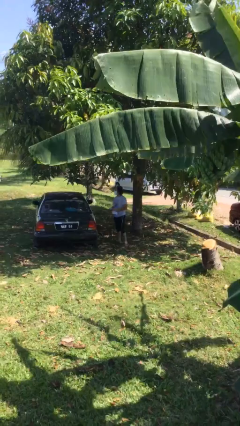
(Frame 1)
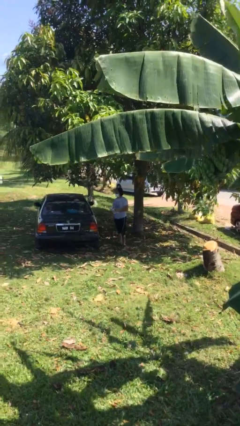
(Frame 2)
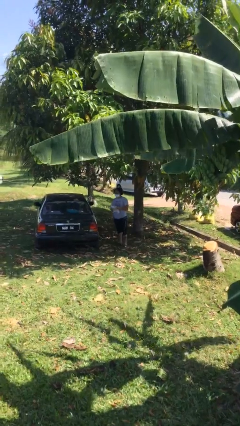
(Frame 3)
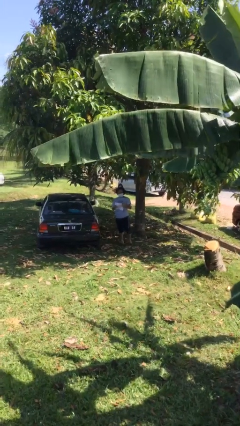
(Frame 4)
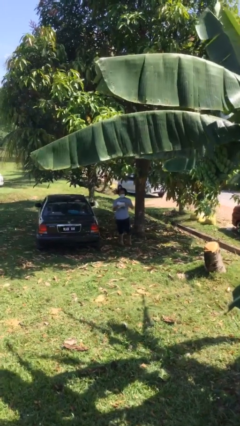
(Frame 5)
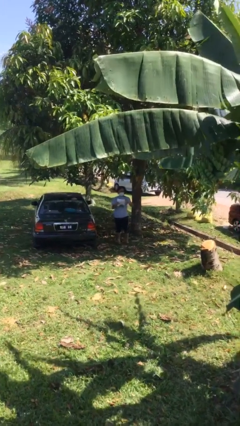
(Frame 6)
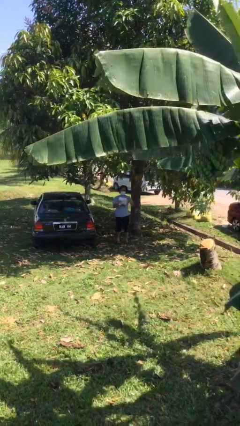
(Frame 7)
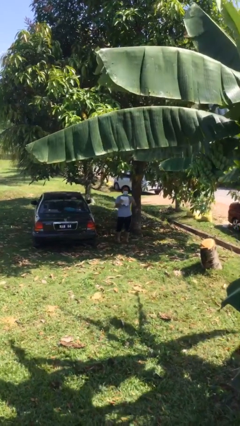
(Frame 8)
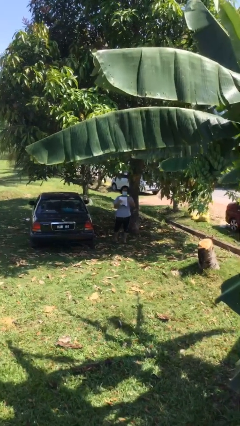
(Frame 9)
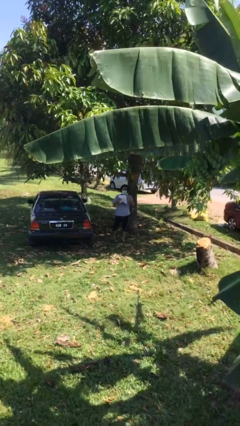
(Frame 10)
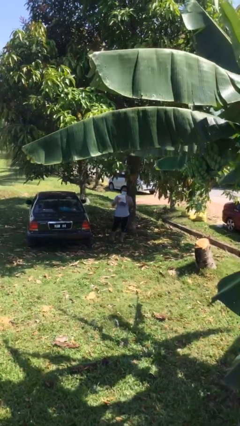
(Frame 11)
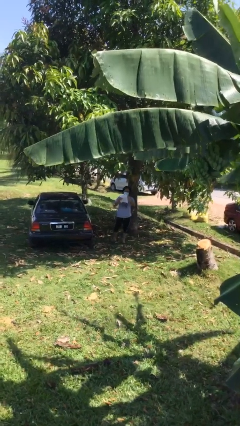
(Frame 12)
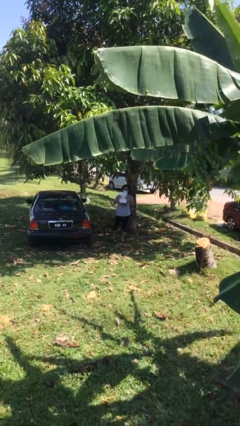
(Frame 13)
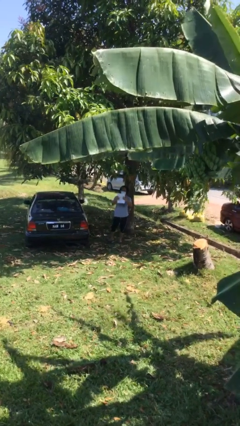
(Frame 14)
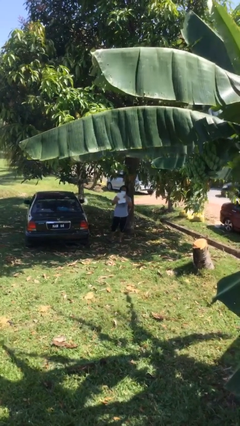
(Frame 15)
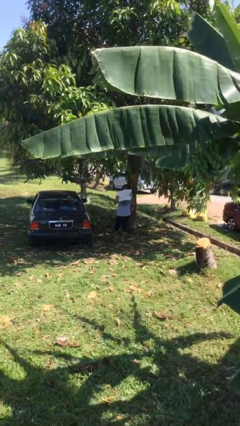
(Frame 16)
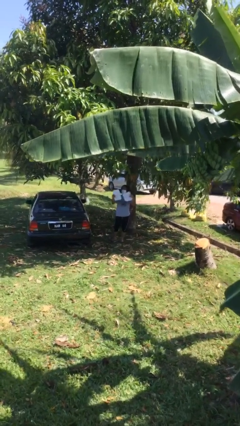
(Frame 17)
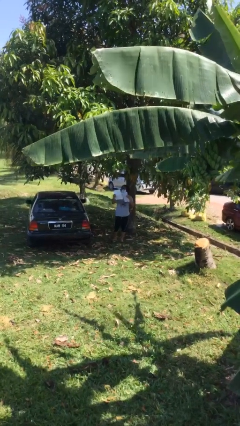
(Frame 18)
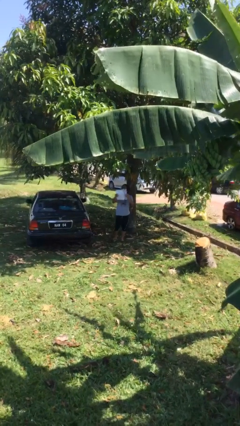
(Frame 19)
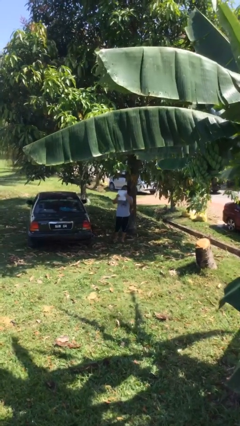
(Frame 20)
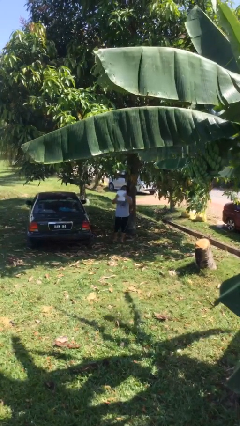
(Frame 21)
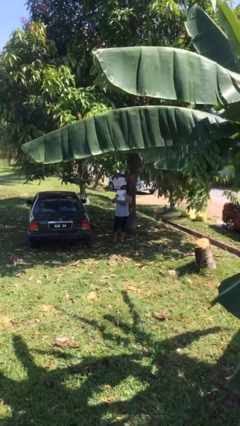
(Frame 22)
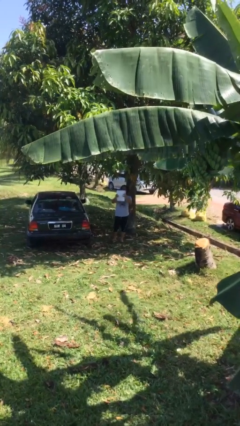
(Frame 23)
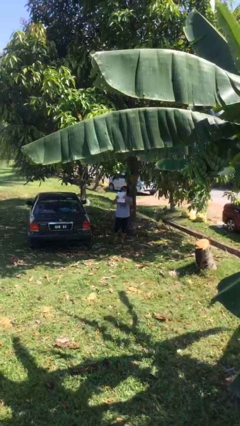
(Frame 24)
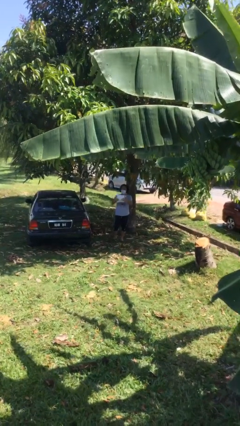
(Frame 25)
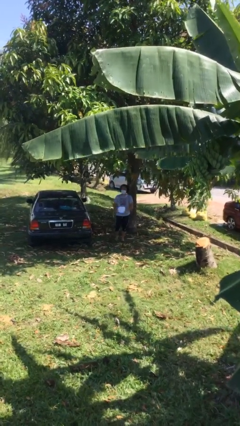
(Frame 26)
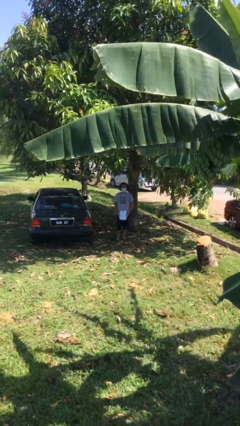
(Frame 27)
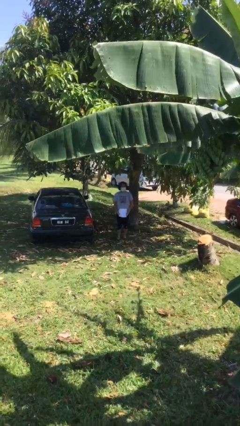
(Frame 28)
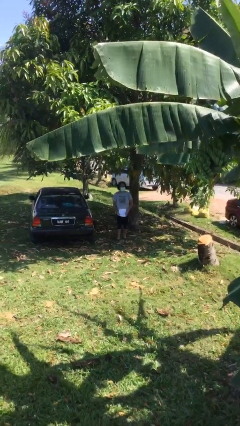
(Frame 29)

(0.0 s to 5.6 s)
person reads document

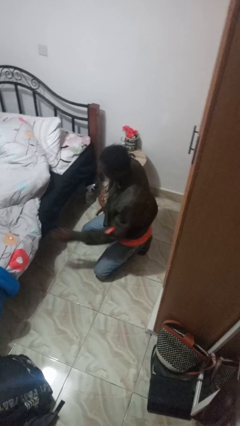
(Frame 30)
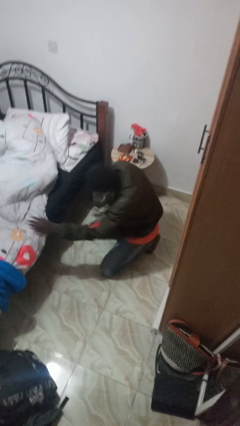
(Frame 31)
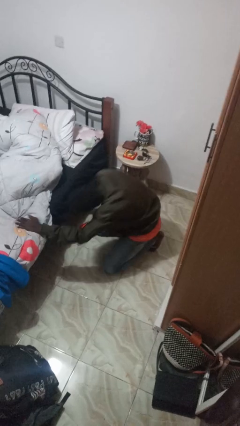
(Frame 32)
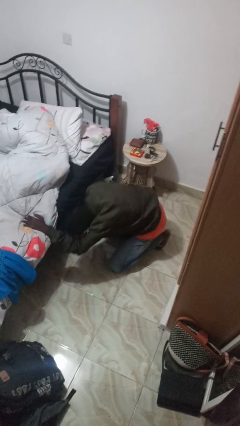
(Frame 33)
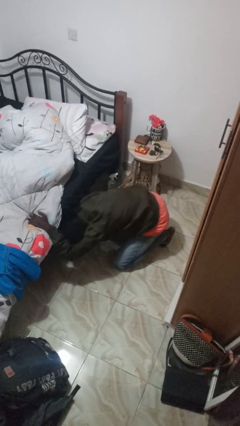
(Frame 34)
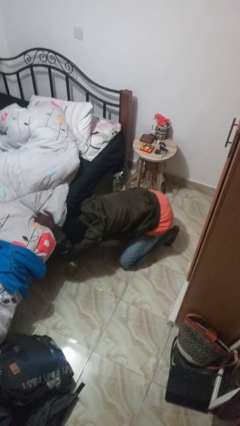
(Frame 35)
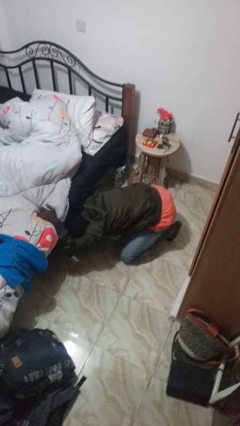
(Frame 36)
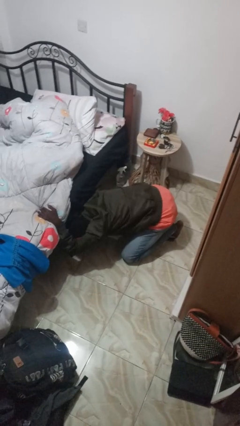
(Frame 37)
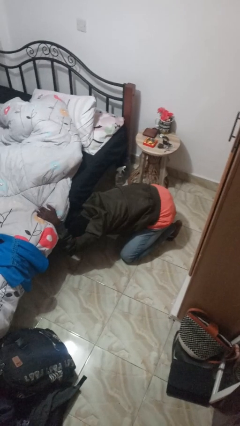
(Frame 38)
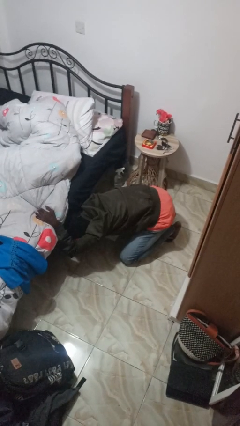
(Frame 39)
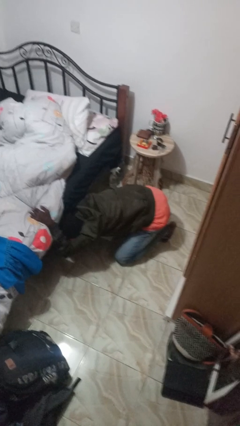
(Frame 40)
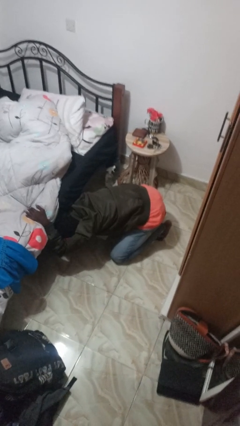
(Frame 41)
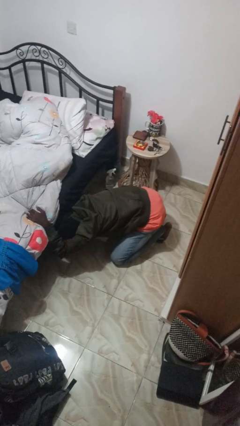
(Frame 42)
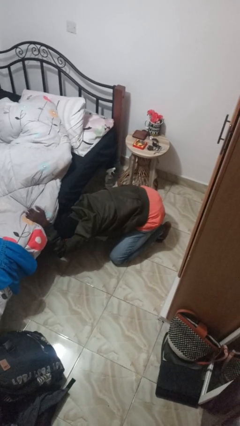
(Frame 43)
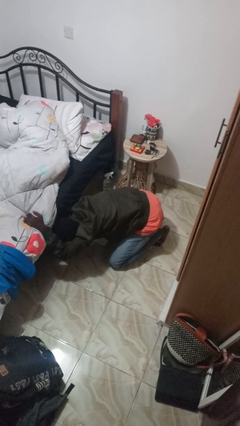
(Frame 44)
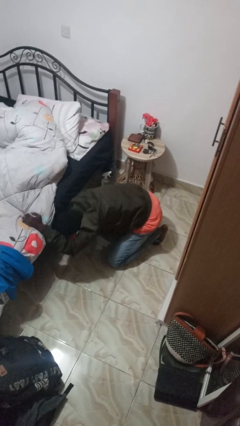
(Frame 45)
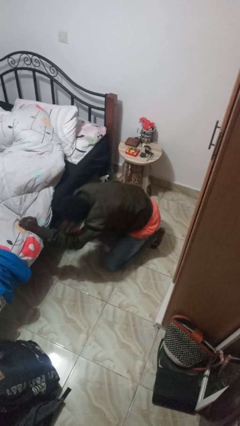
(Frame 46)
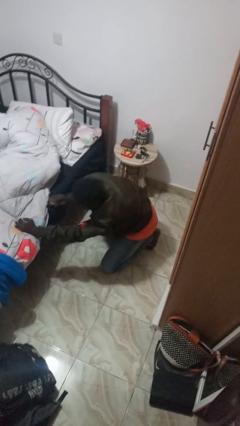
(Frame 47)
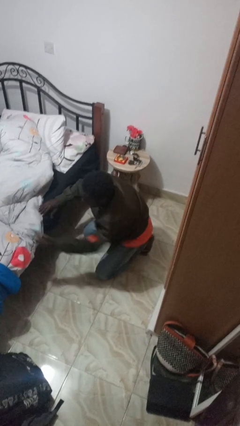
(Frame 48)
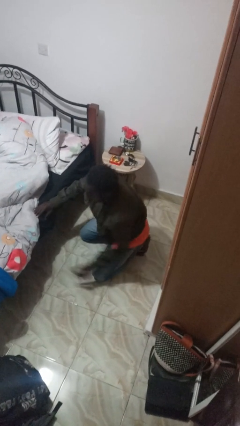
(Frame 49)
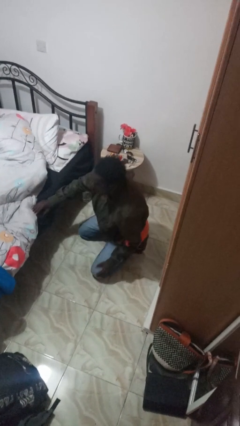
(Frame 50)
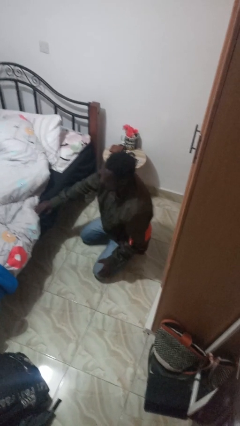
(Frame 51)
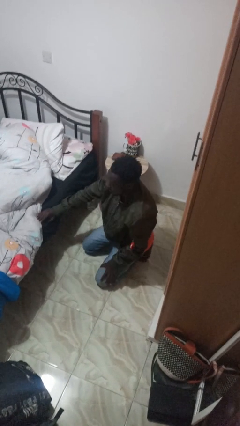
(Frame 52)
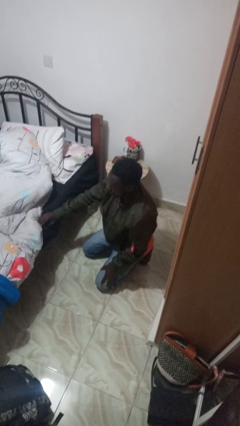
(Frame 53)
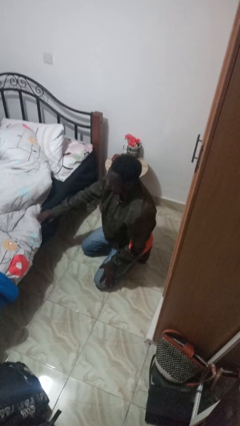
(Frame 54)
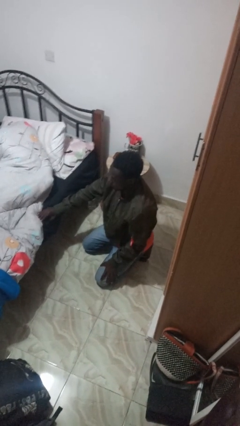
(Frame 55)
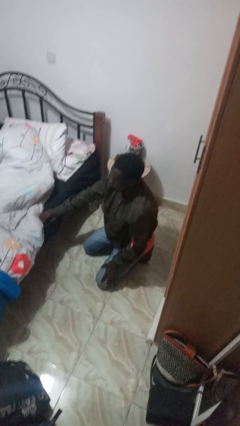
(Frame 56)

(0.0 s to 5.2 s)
person searches under bed

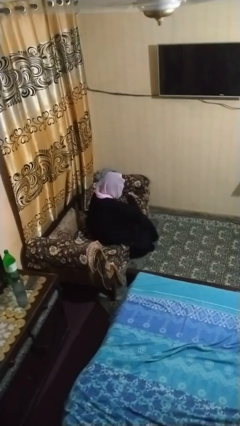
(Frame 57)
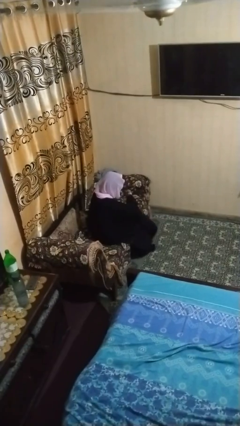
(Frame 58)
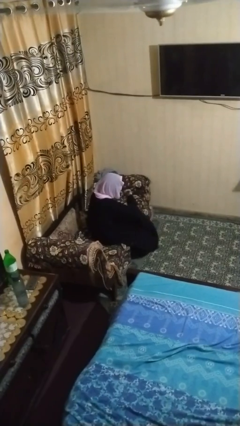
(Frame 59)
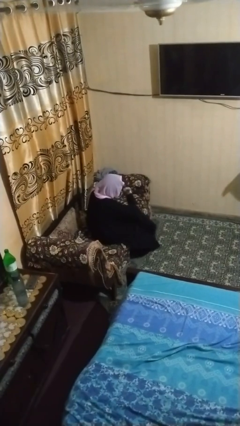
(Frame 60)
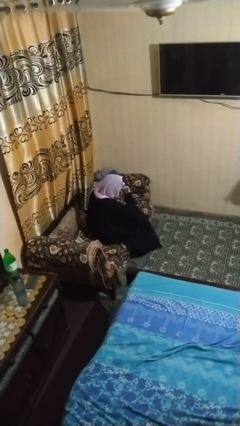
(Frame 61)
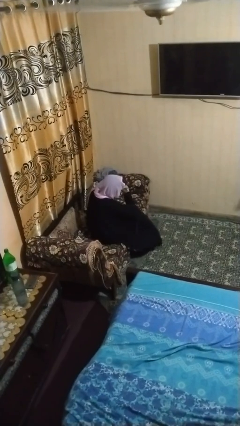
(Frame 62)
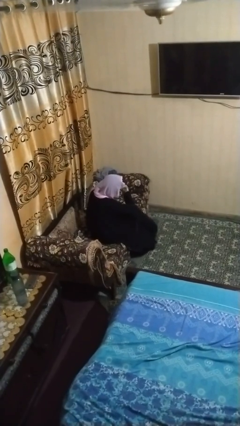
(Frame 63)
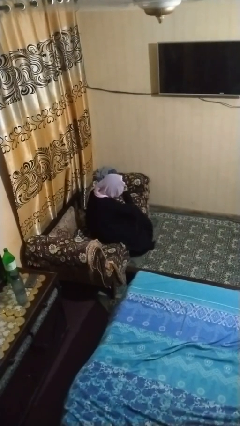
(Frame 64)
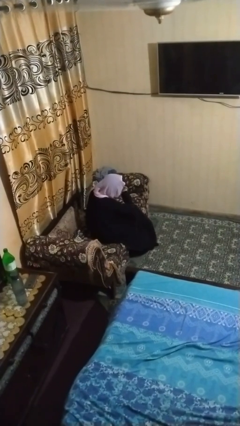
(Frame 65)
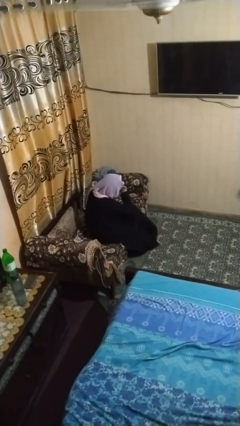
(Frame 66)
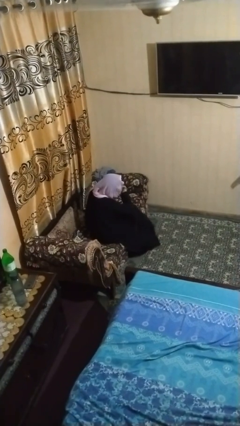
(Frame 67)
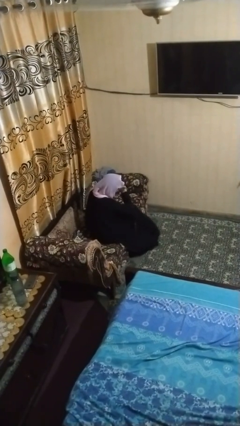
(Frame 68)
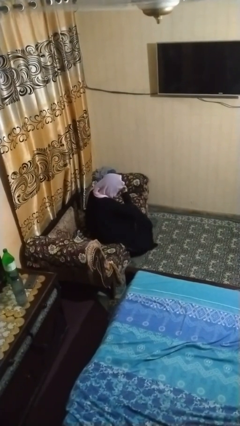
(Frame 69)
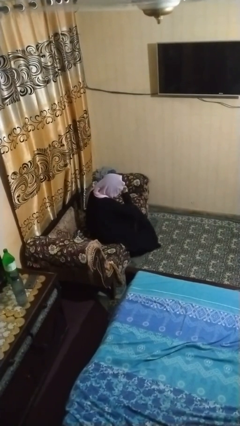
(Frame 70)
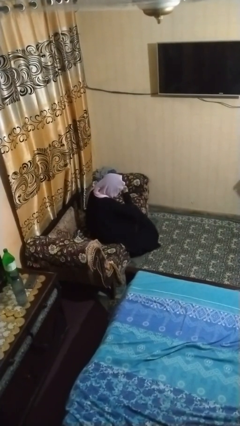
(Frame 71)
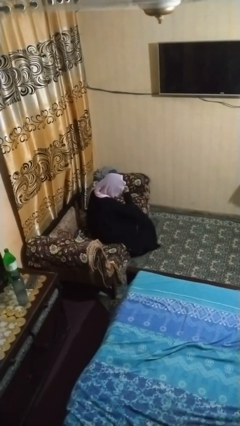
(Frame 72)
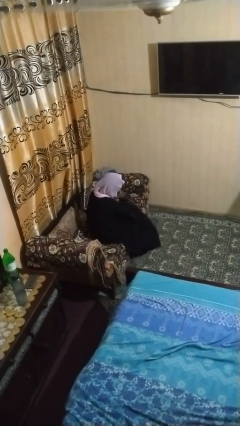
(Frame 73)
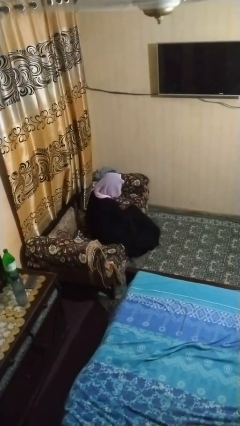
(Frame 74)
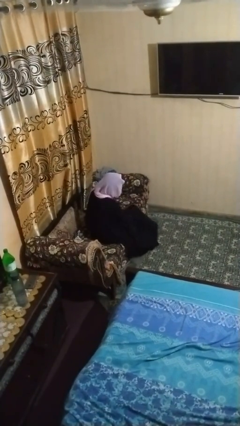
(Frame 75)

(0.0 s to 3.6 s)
person looks at wristwatch

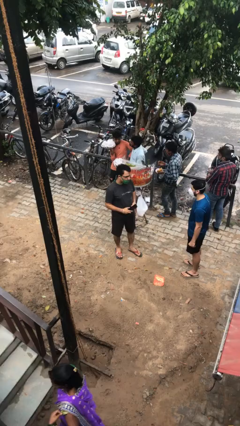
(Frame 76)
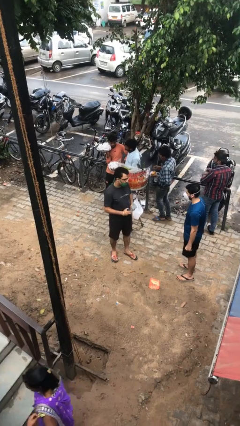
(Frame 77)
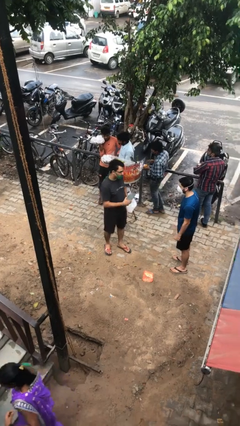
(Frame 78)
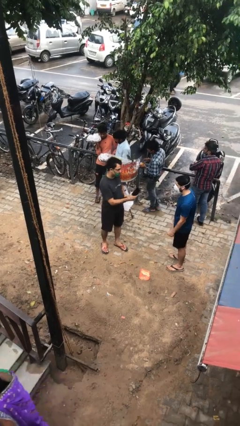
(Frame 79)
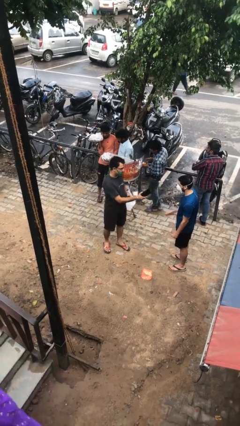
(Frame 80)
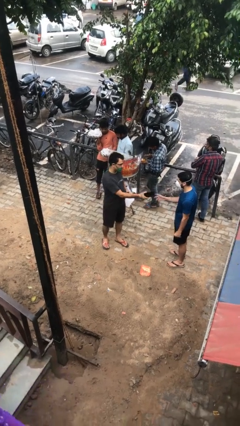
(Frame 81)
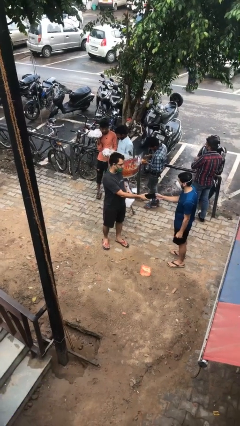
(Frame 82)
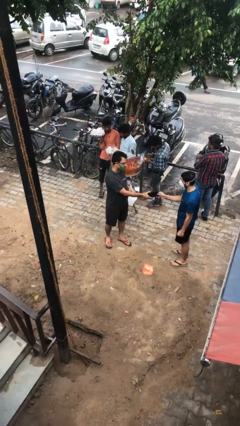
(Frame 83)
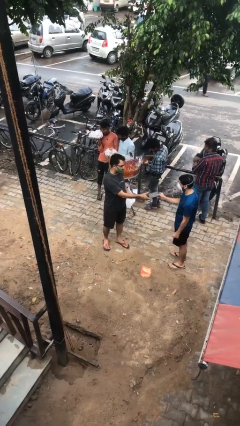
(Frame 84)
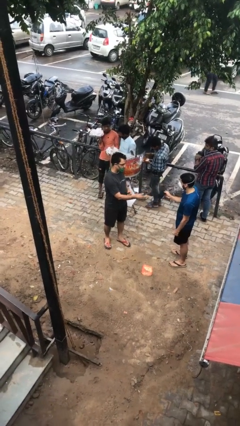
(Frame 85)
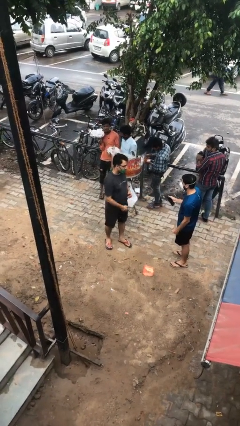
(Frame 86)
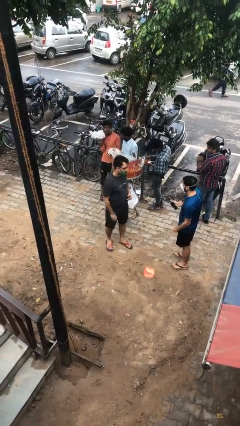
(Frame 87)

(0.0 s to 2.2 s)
person transfers object to person

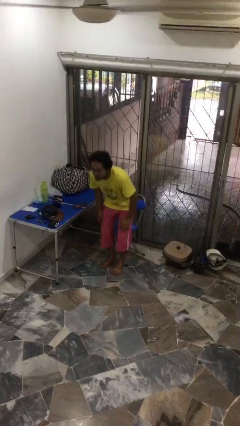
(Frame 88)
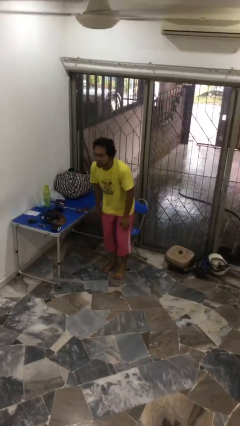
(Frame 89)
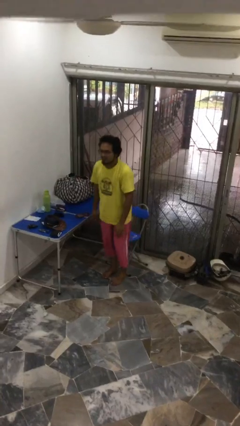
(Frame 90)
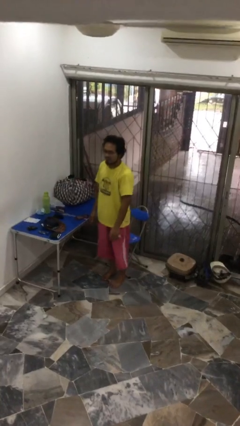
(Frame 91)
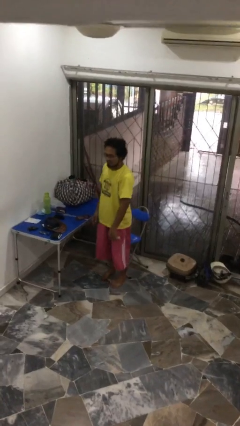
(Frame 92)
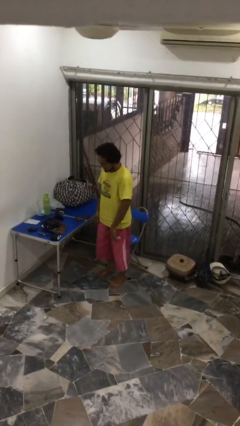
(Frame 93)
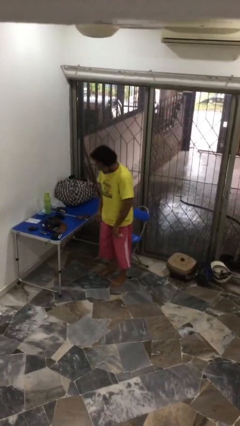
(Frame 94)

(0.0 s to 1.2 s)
person stands up

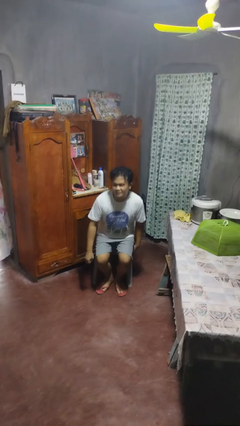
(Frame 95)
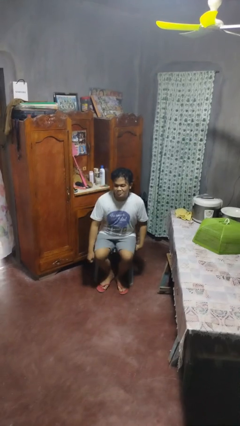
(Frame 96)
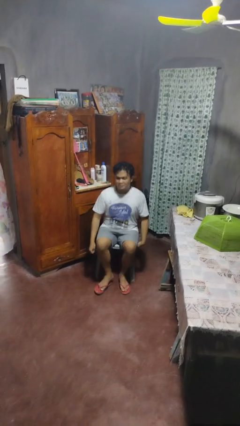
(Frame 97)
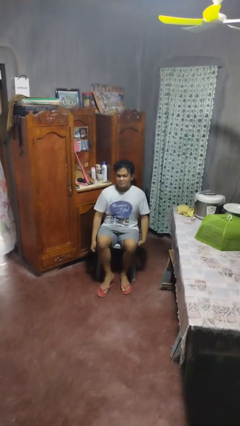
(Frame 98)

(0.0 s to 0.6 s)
person sits down
